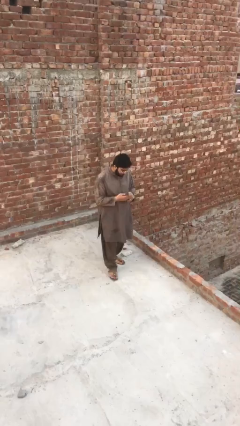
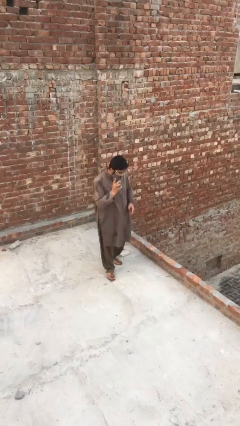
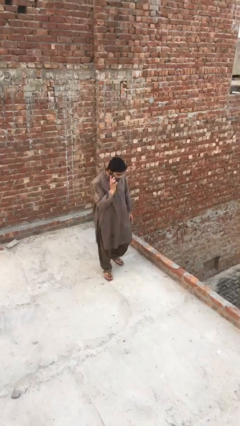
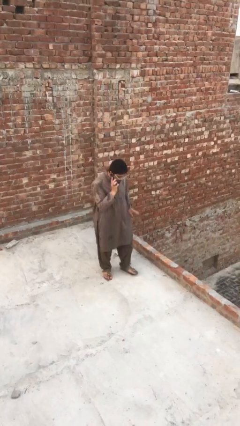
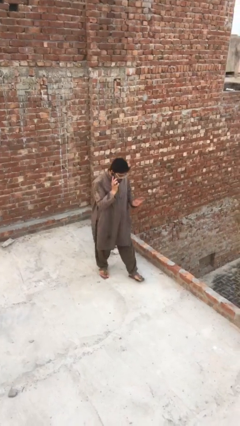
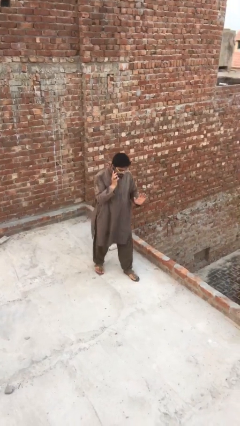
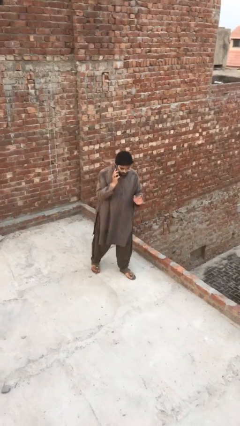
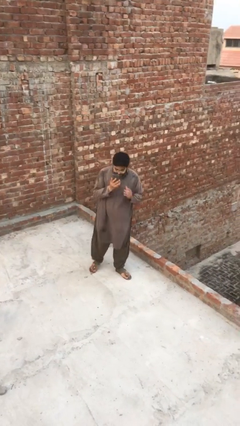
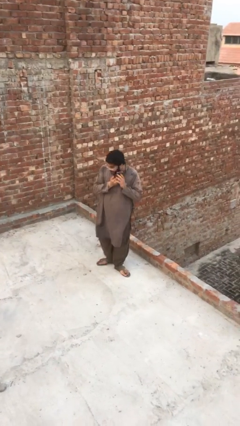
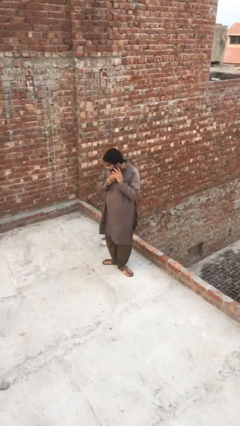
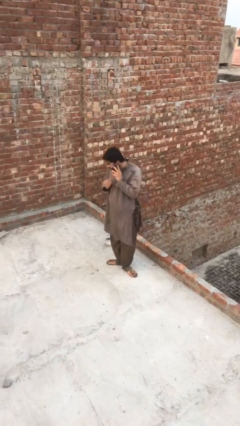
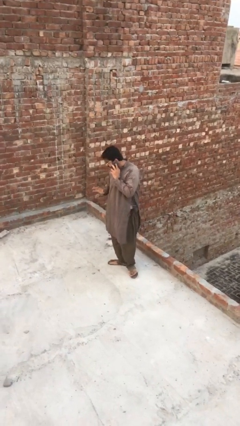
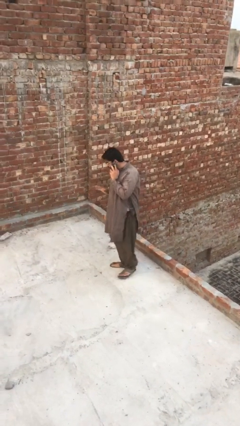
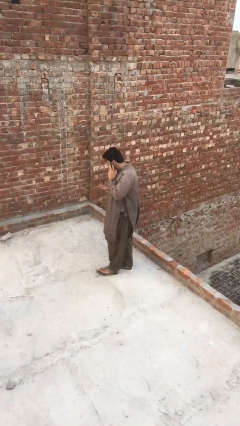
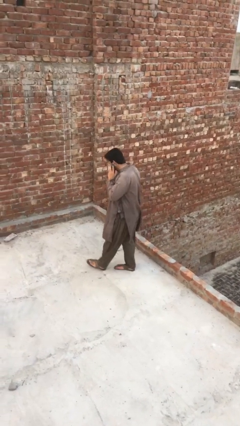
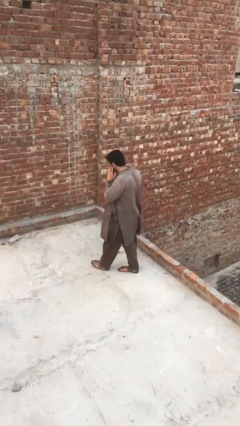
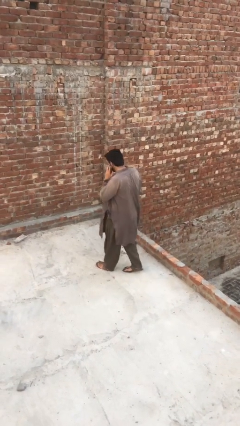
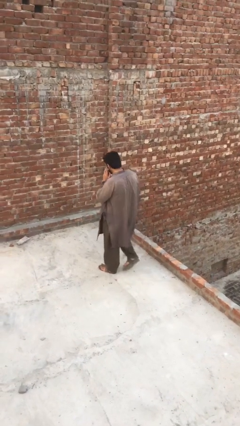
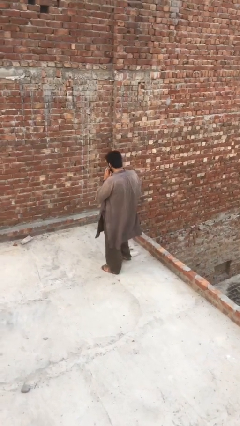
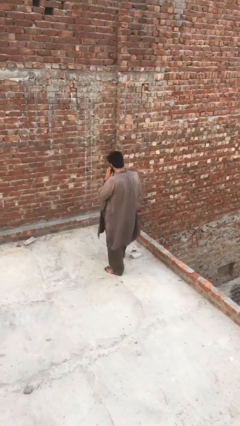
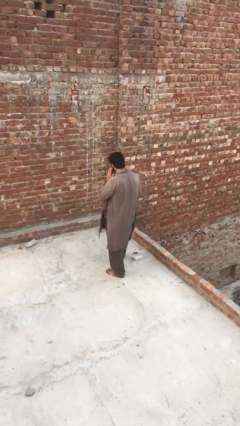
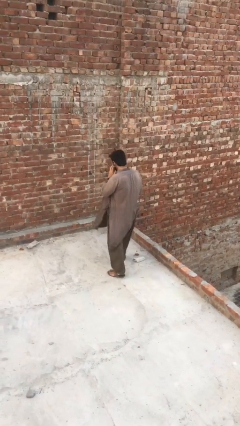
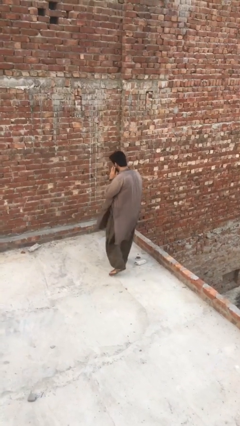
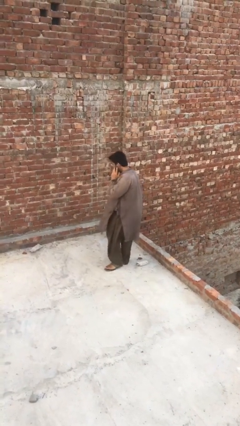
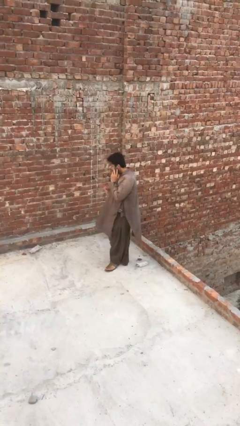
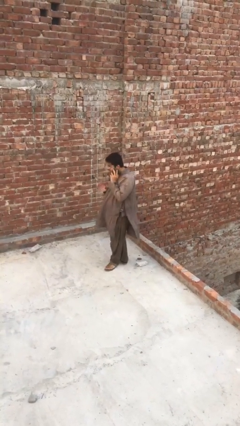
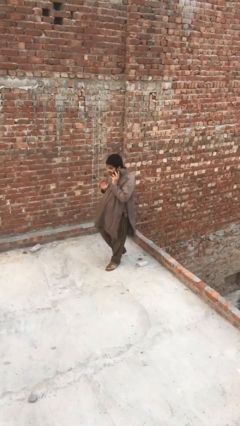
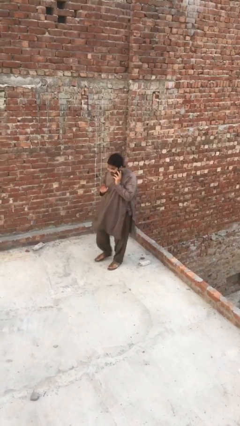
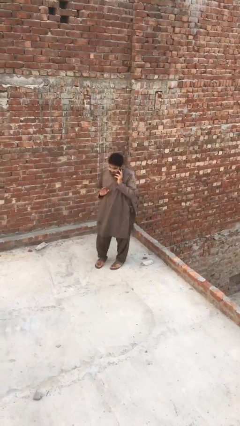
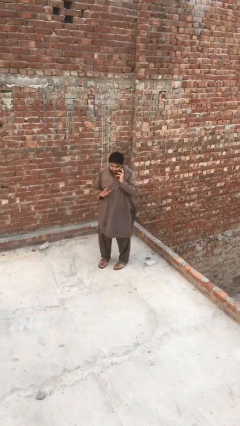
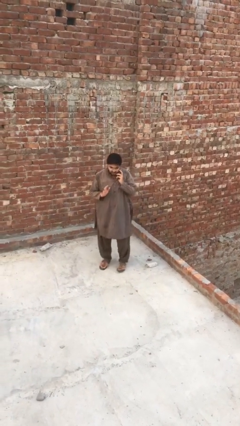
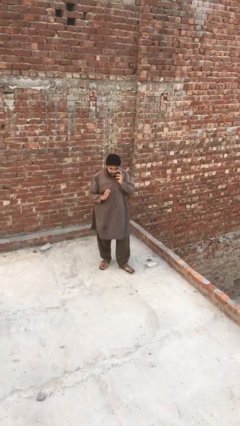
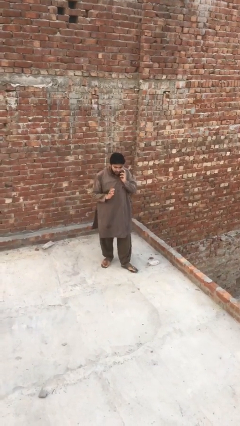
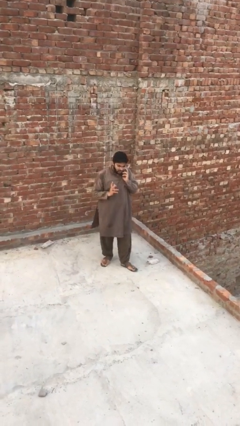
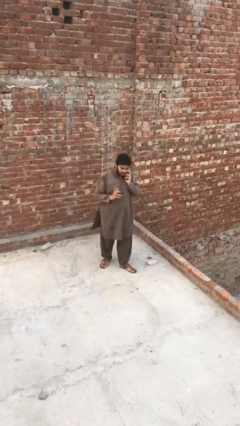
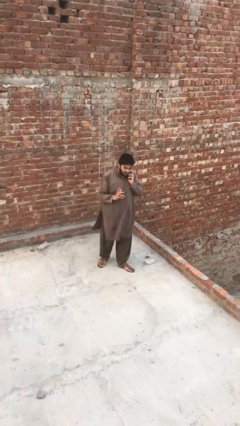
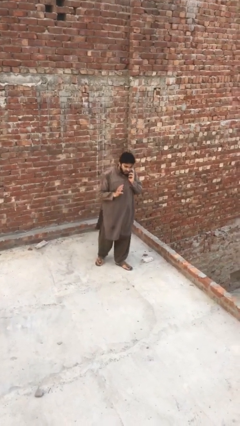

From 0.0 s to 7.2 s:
person talks on phone

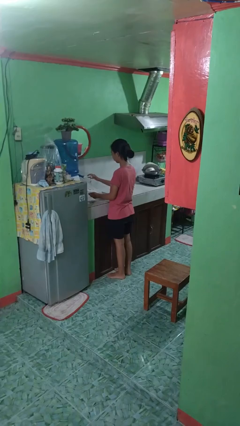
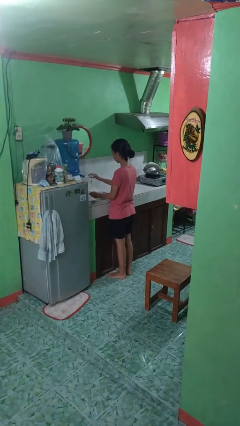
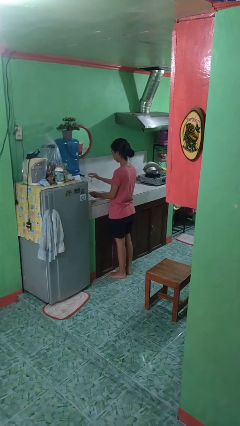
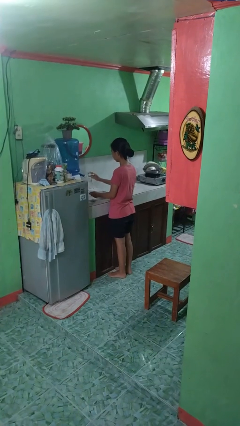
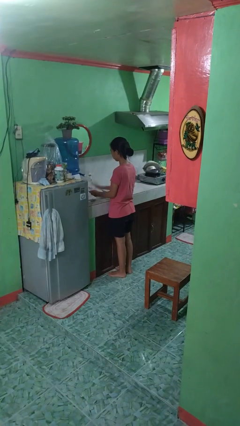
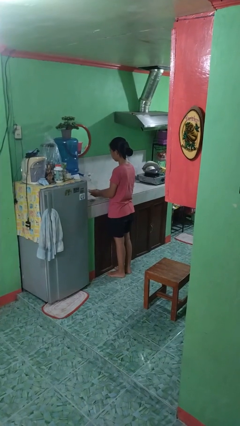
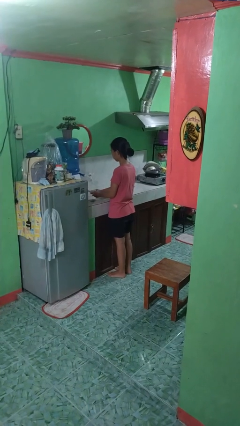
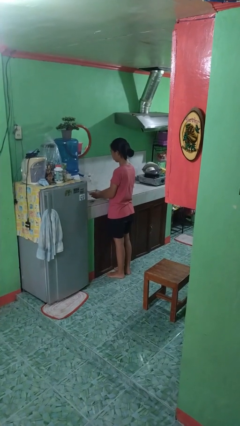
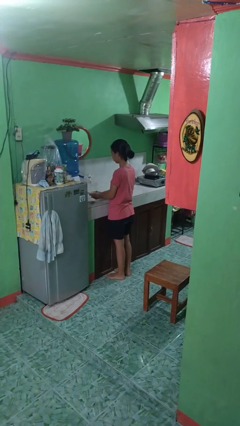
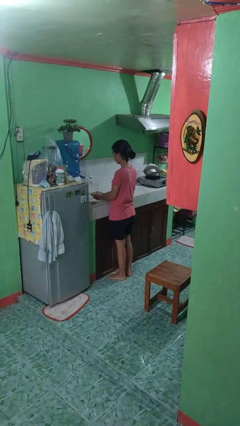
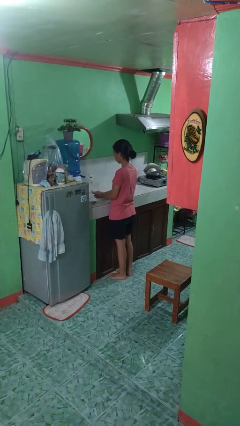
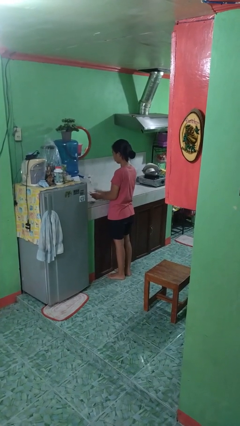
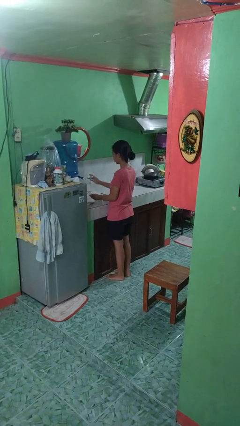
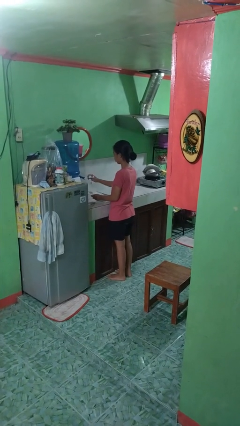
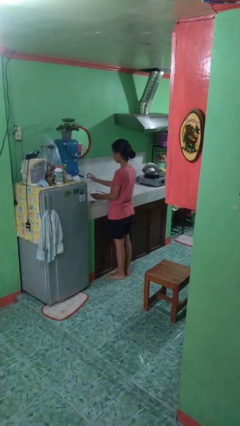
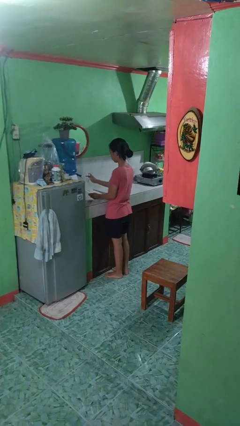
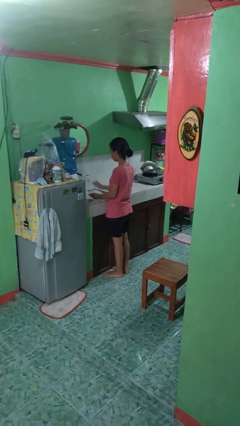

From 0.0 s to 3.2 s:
person washes dish

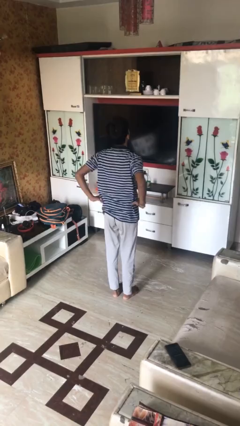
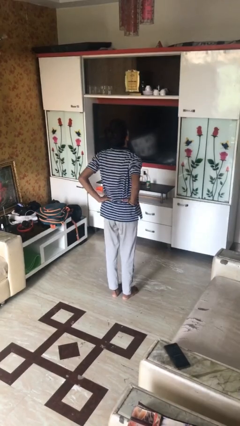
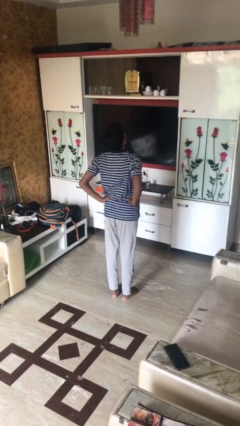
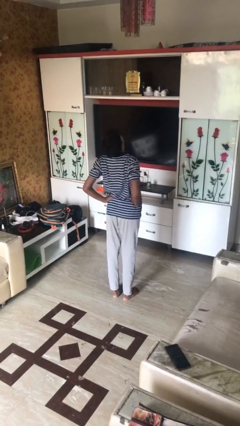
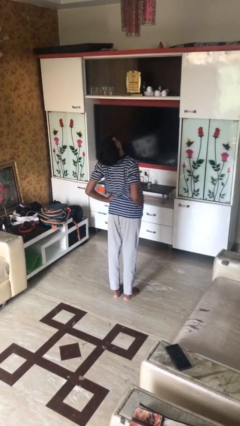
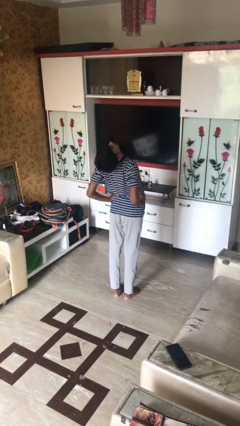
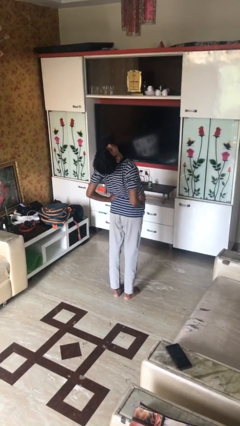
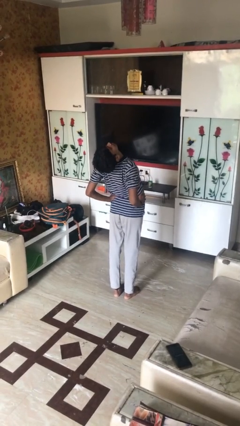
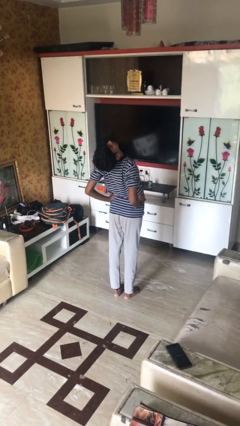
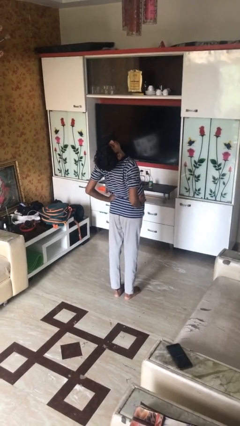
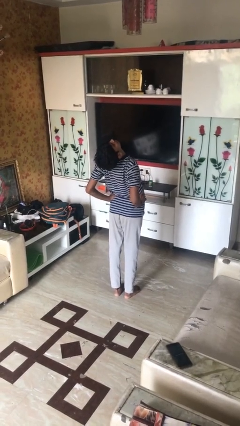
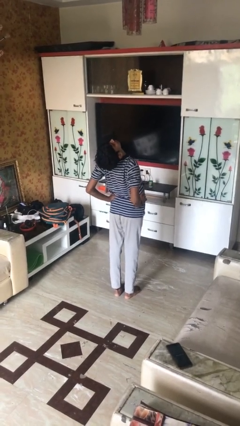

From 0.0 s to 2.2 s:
person stretches back

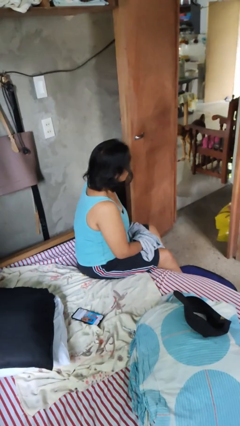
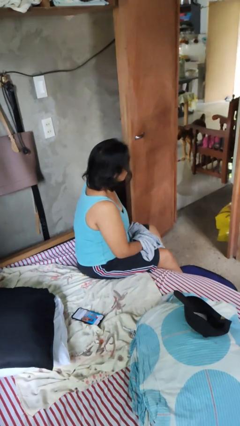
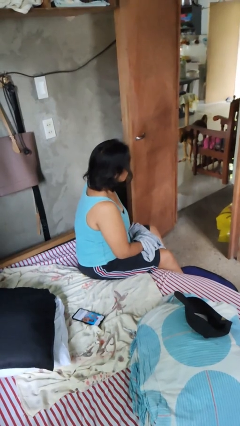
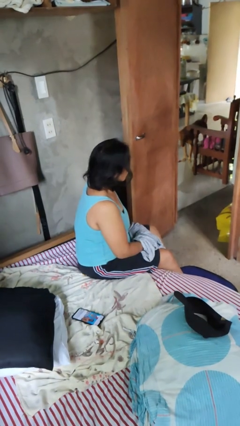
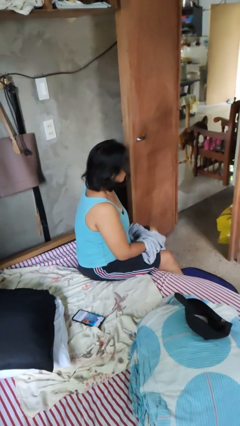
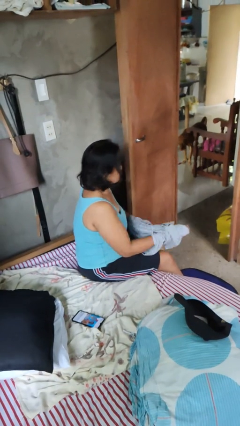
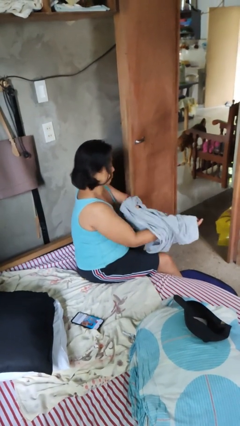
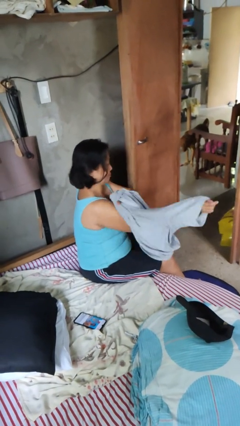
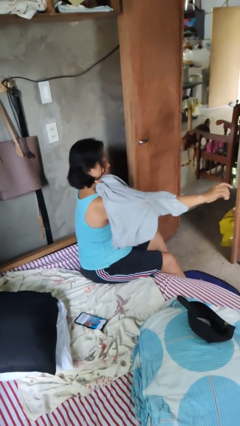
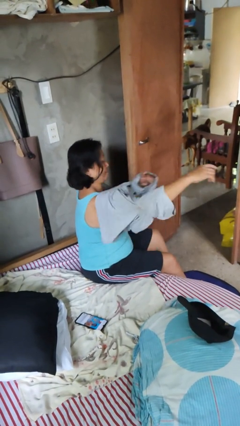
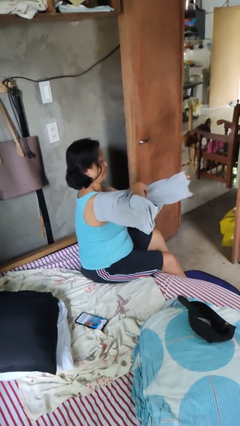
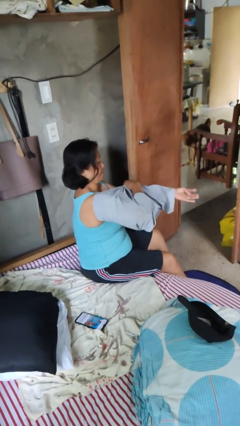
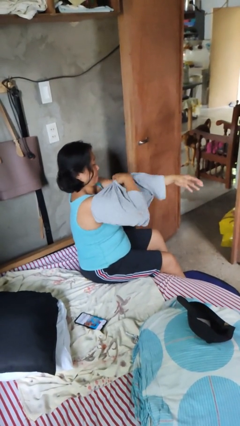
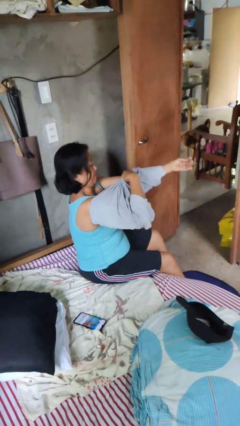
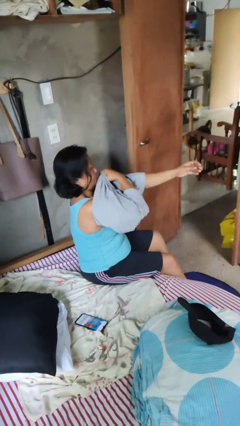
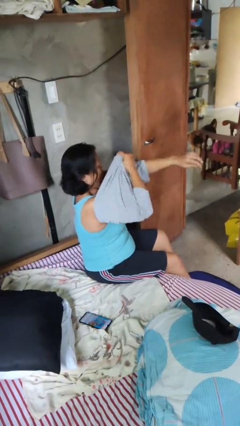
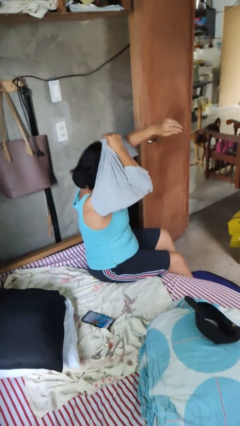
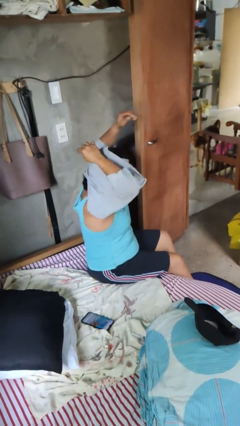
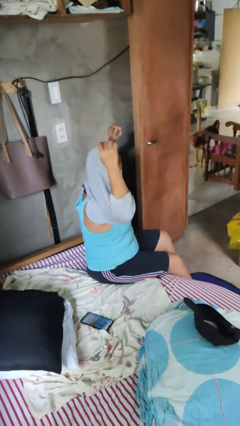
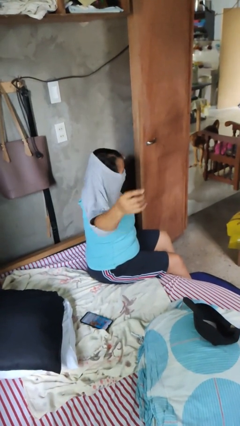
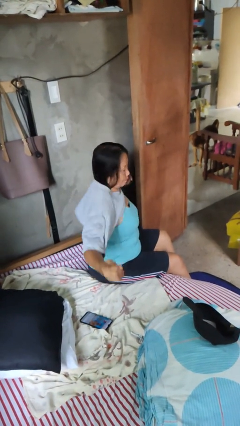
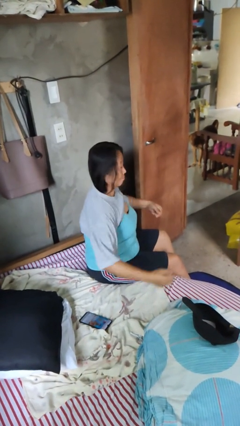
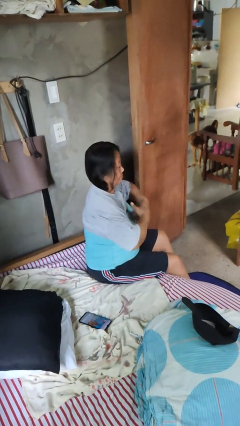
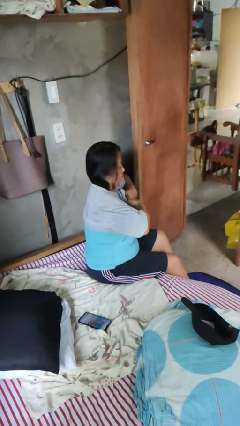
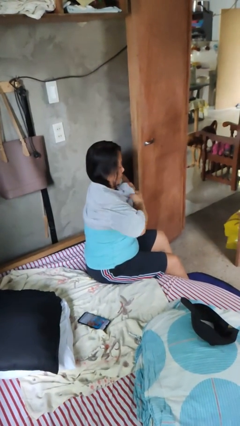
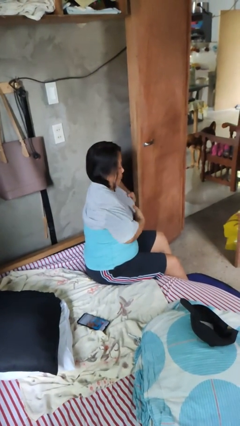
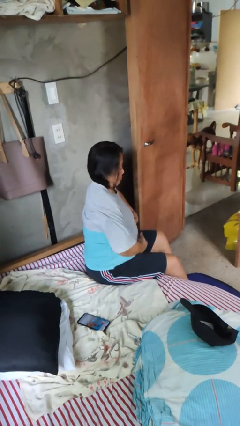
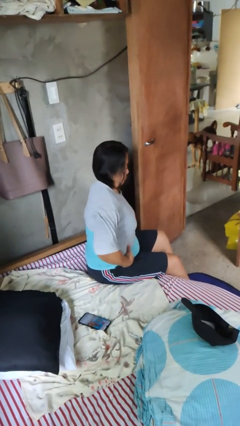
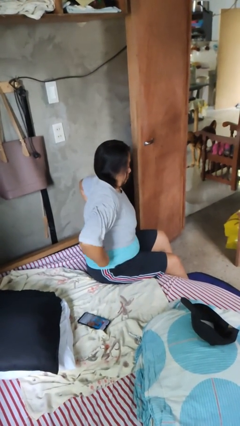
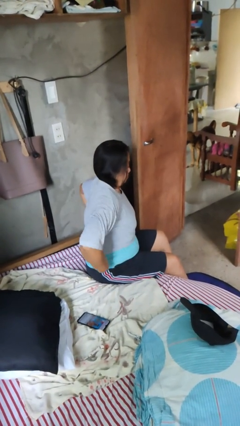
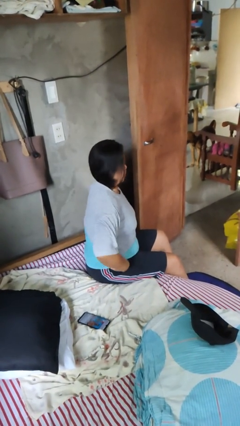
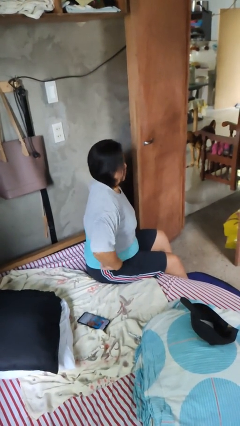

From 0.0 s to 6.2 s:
person puts on shirt
